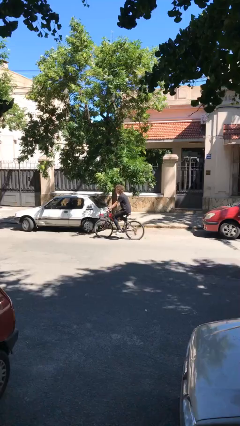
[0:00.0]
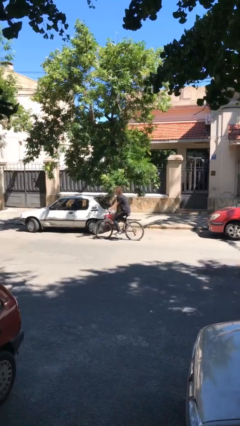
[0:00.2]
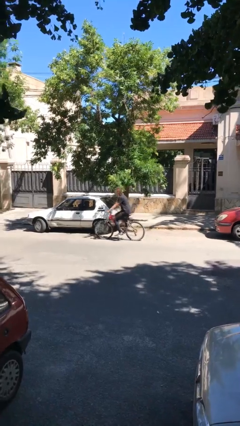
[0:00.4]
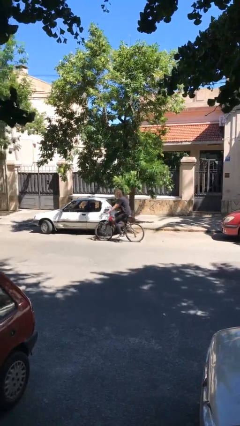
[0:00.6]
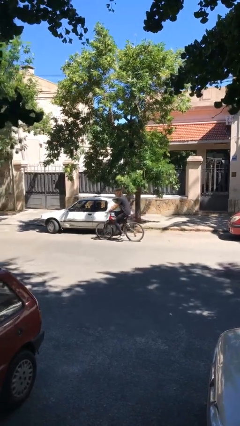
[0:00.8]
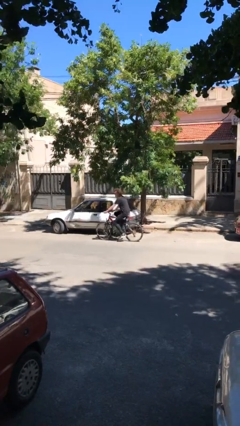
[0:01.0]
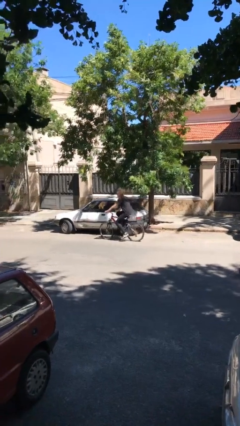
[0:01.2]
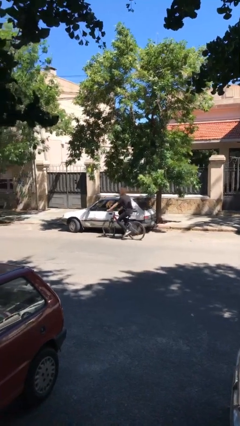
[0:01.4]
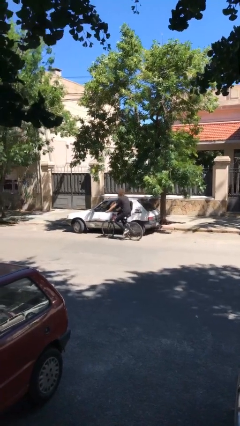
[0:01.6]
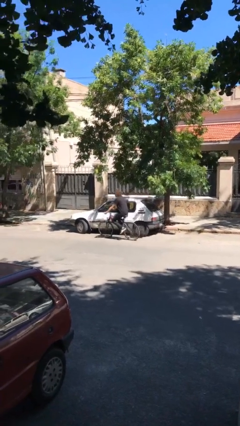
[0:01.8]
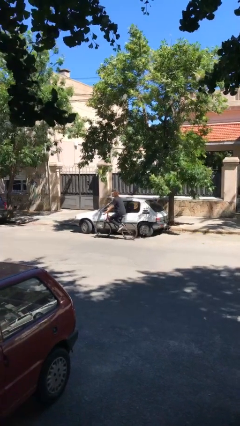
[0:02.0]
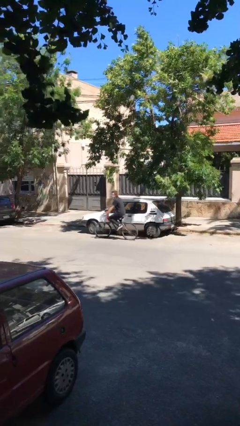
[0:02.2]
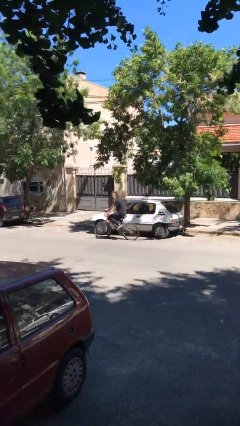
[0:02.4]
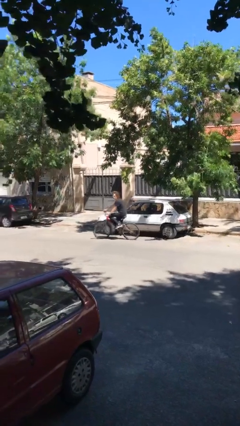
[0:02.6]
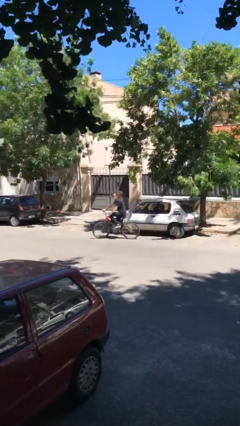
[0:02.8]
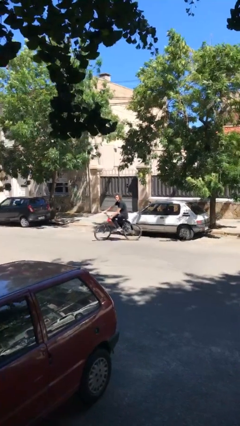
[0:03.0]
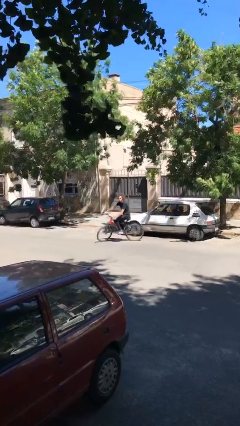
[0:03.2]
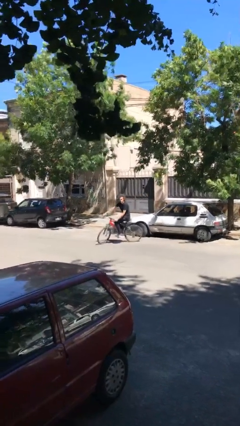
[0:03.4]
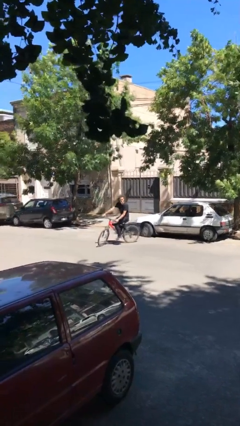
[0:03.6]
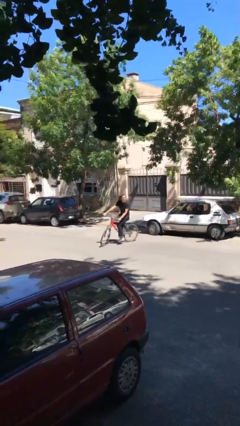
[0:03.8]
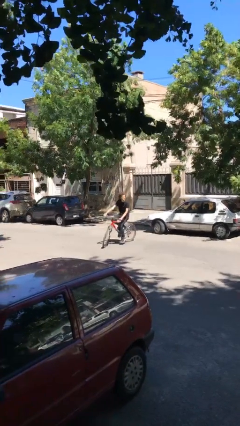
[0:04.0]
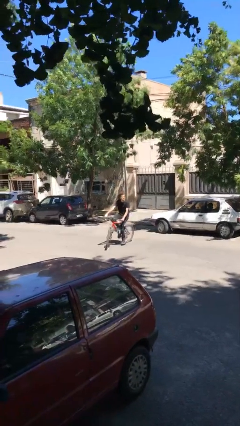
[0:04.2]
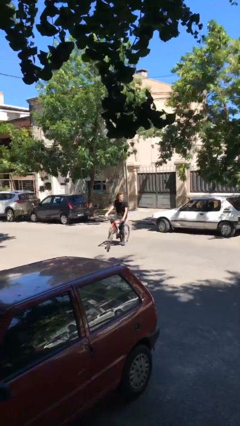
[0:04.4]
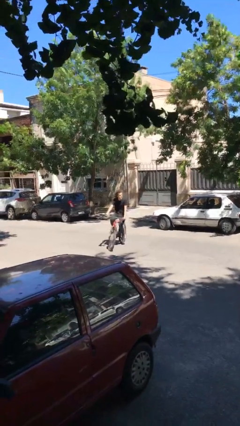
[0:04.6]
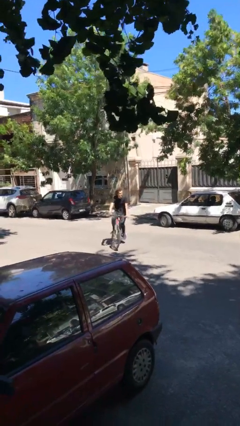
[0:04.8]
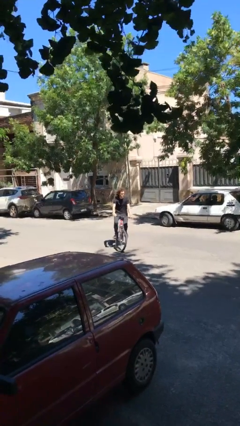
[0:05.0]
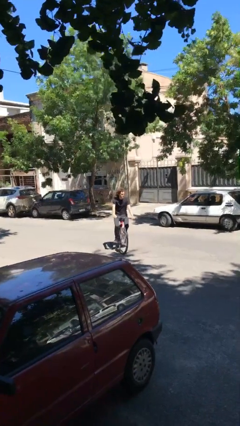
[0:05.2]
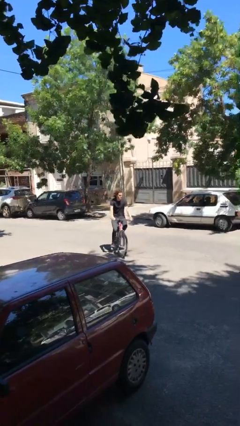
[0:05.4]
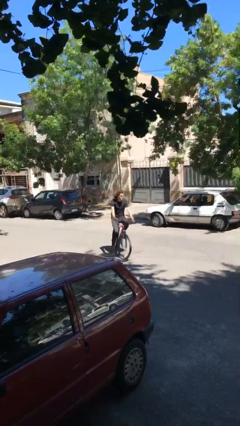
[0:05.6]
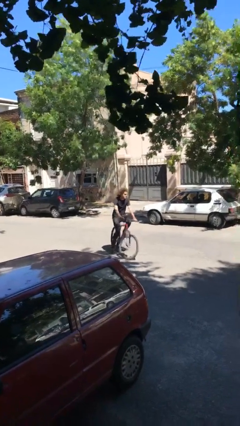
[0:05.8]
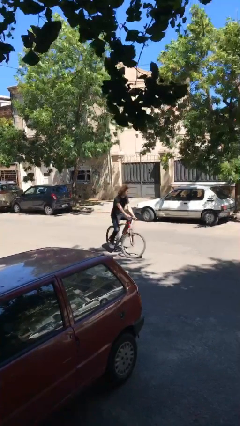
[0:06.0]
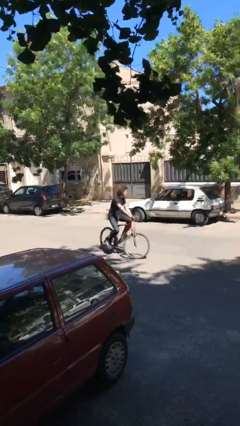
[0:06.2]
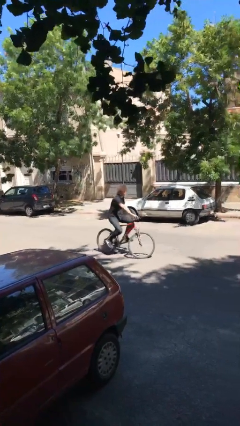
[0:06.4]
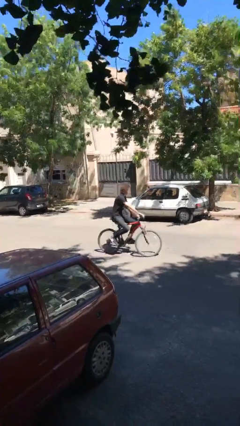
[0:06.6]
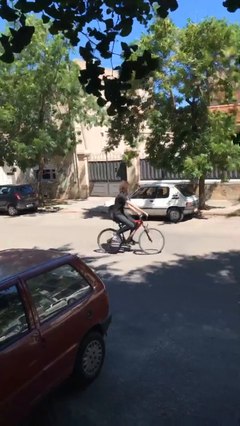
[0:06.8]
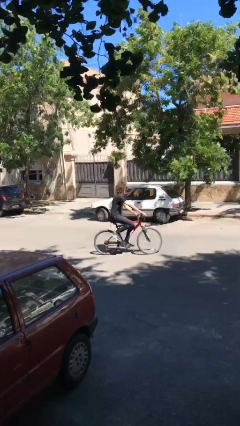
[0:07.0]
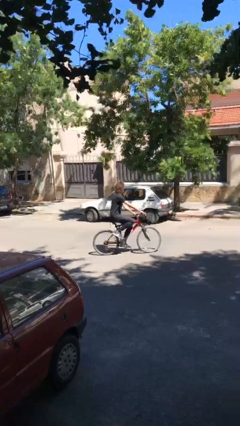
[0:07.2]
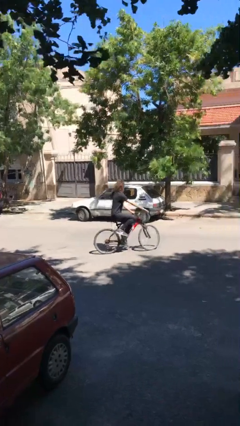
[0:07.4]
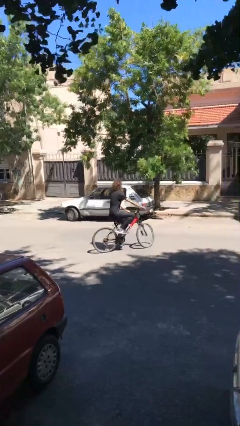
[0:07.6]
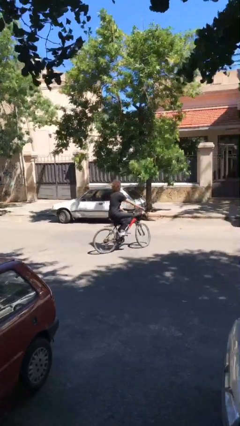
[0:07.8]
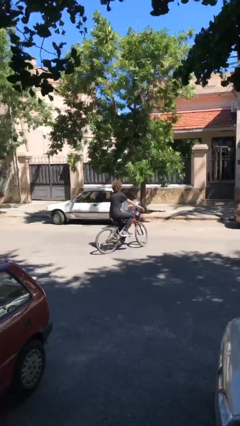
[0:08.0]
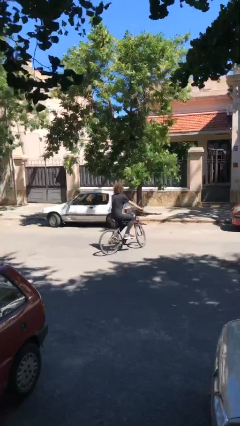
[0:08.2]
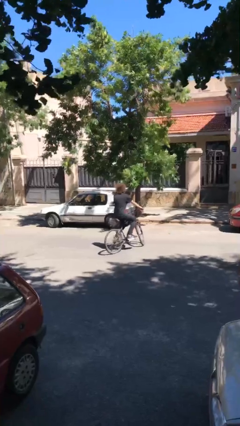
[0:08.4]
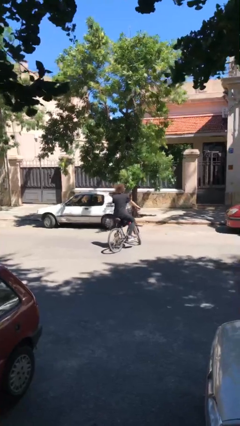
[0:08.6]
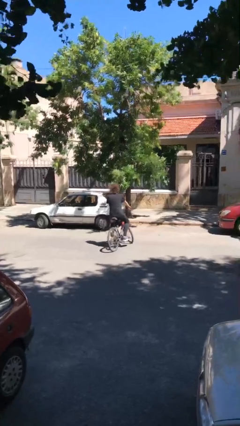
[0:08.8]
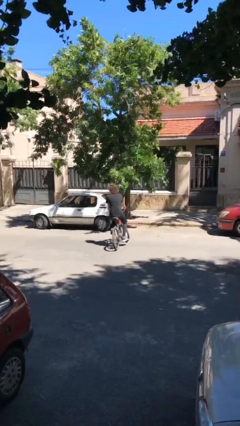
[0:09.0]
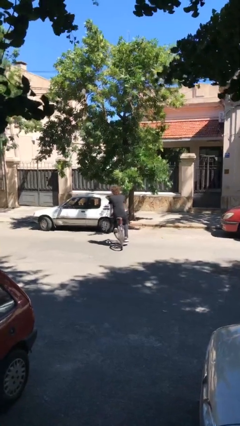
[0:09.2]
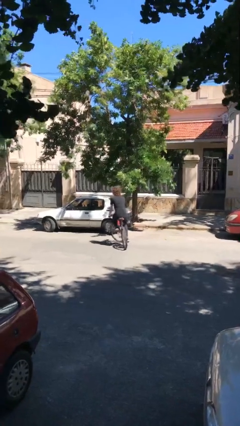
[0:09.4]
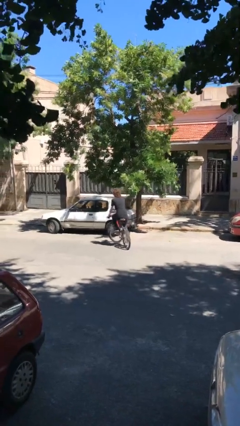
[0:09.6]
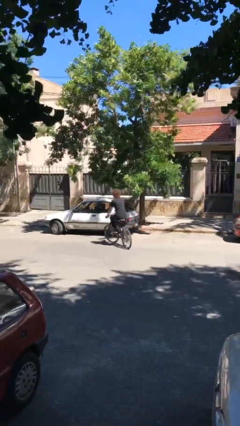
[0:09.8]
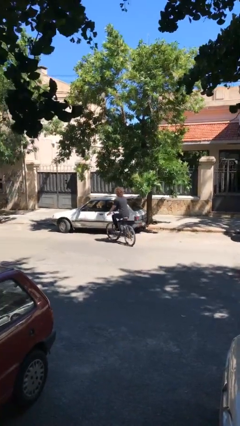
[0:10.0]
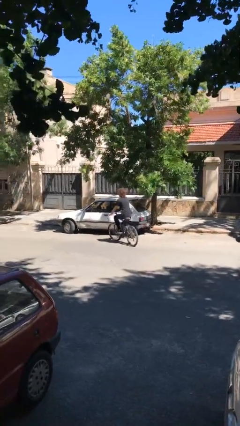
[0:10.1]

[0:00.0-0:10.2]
person rides bicycle

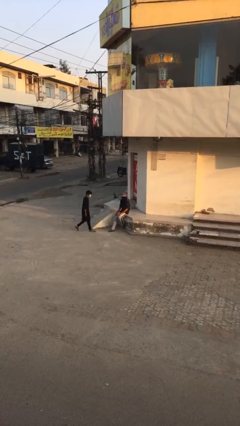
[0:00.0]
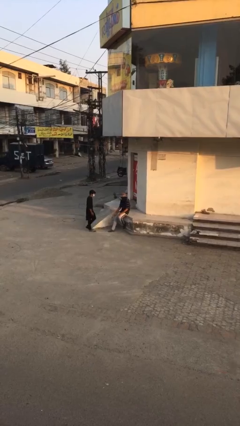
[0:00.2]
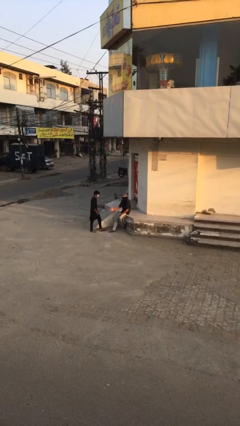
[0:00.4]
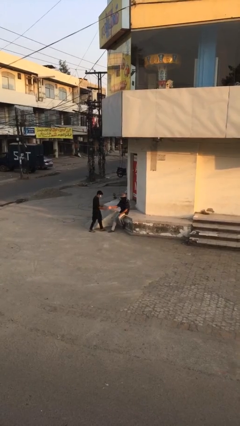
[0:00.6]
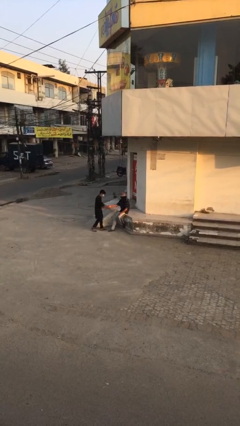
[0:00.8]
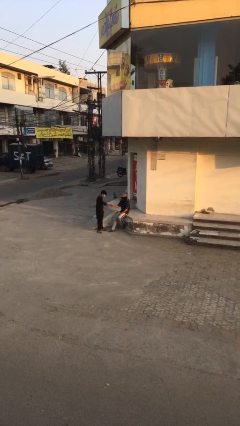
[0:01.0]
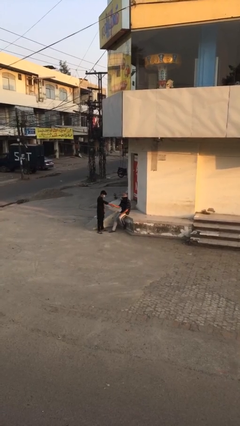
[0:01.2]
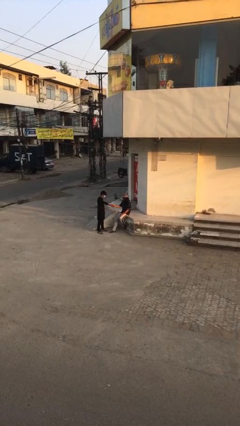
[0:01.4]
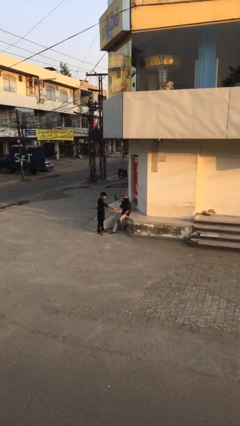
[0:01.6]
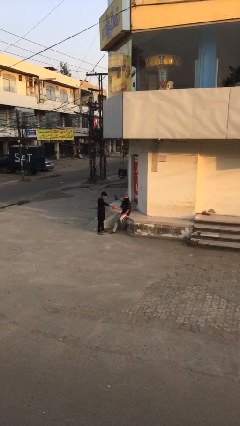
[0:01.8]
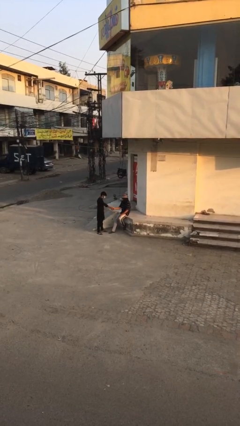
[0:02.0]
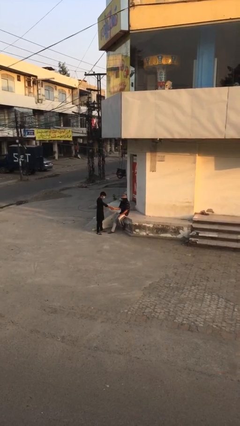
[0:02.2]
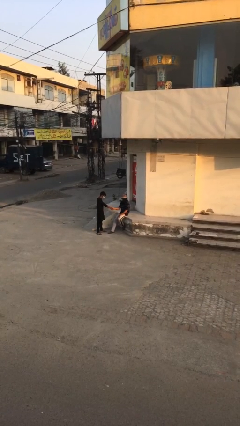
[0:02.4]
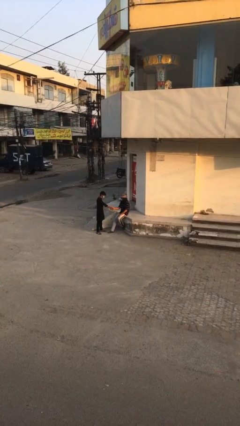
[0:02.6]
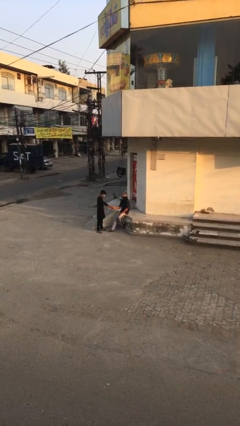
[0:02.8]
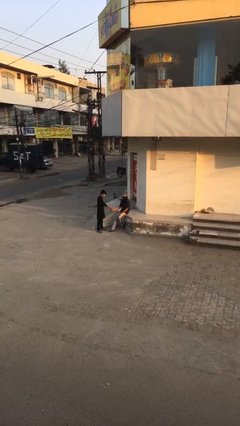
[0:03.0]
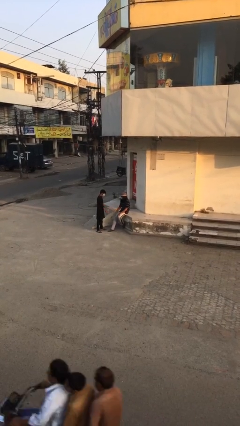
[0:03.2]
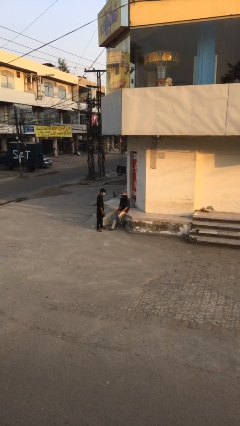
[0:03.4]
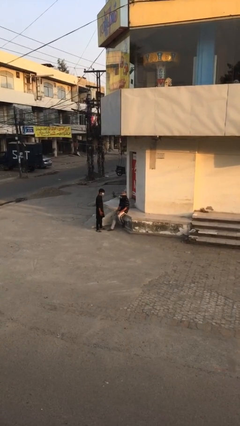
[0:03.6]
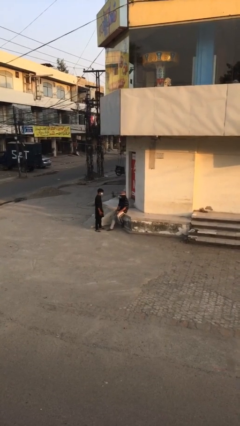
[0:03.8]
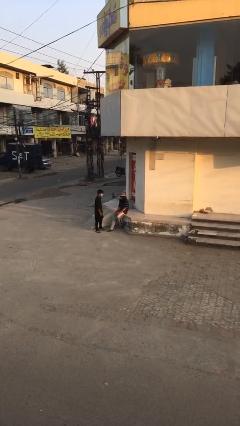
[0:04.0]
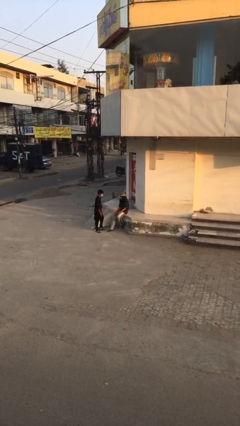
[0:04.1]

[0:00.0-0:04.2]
person shakes hand

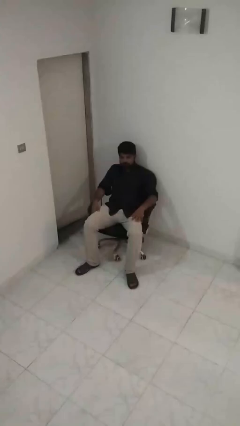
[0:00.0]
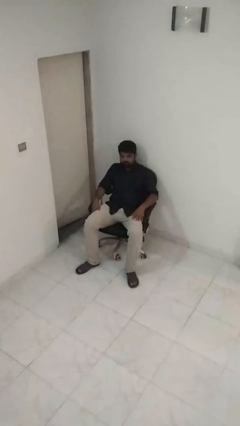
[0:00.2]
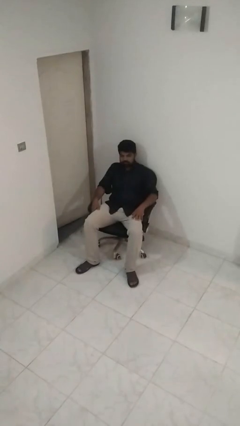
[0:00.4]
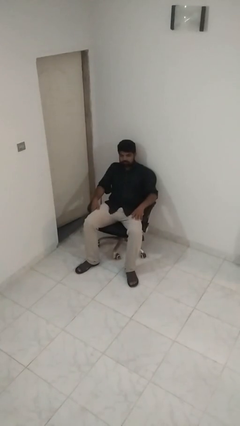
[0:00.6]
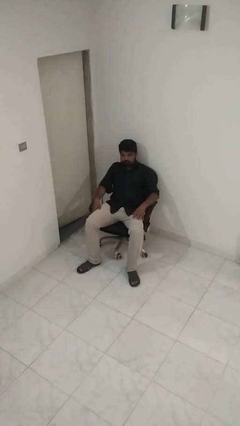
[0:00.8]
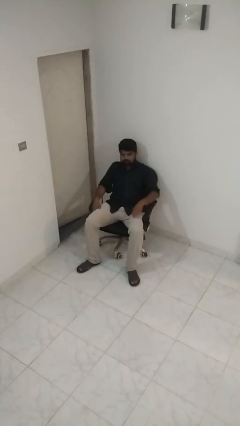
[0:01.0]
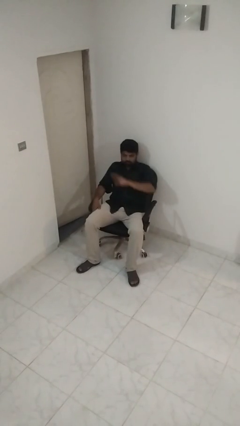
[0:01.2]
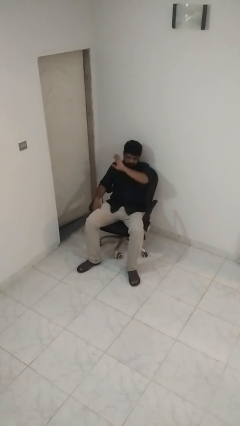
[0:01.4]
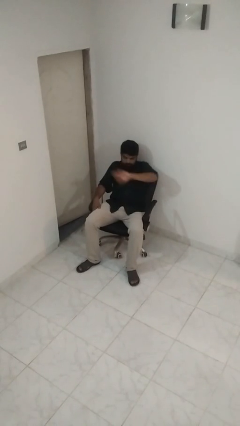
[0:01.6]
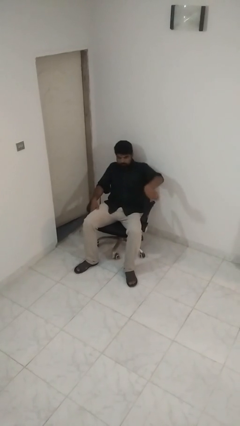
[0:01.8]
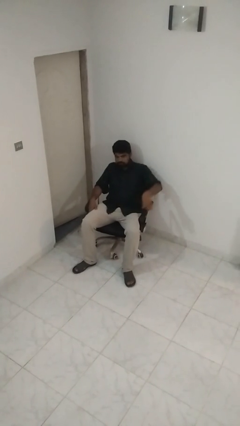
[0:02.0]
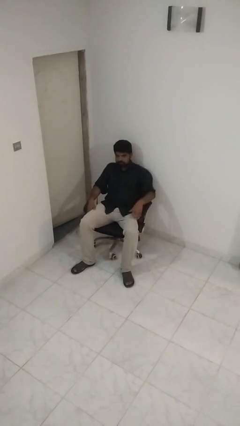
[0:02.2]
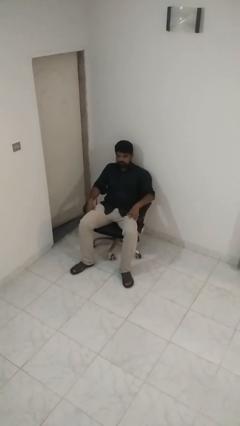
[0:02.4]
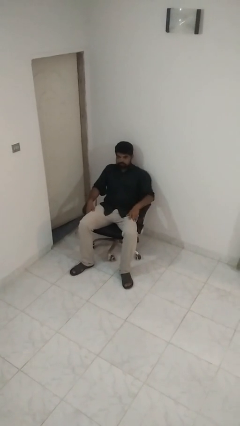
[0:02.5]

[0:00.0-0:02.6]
person gestures swipe left

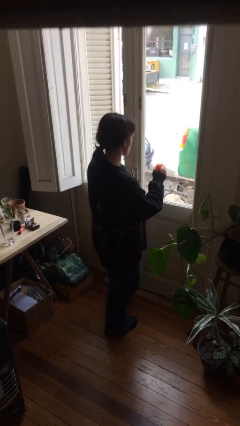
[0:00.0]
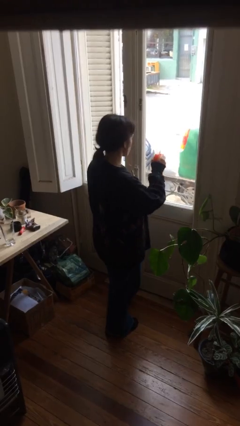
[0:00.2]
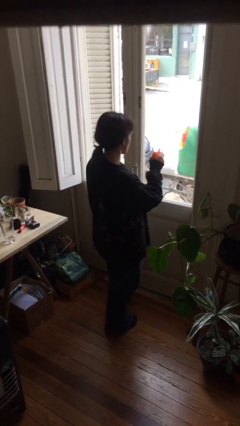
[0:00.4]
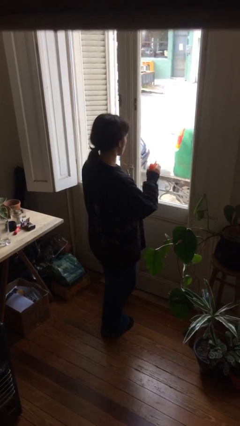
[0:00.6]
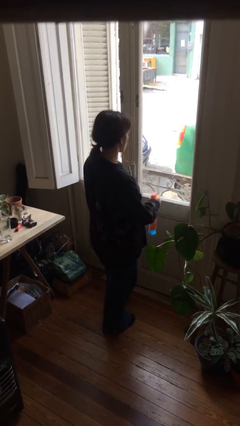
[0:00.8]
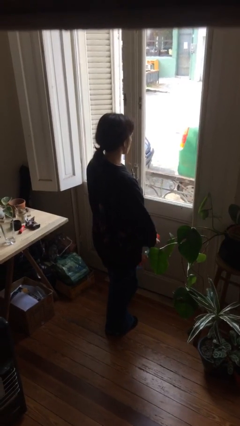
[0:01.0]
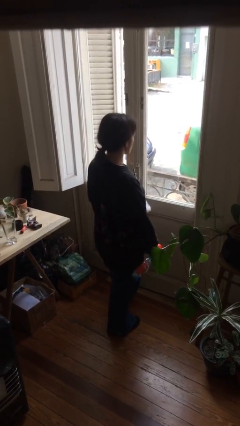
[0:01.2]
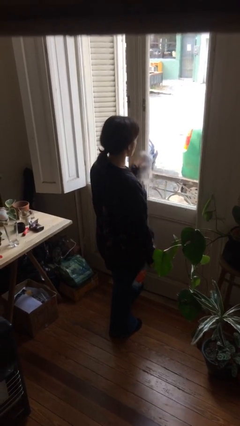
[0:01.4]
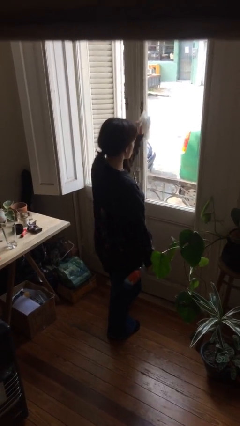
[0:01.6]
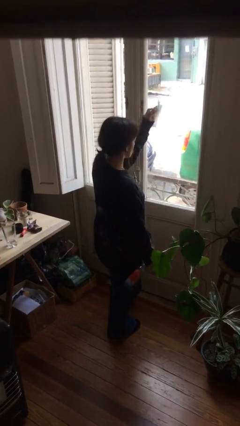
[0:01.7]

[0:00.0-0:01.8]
person sprays from bottle
